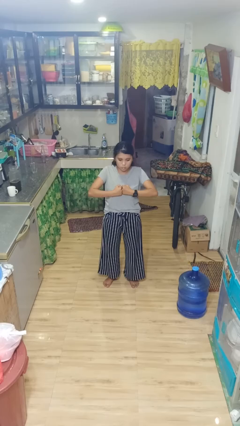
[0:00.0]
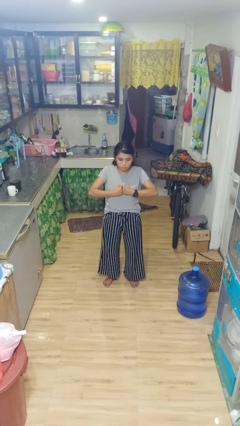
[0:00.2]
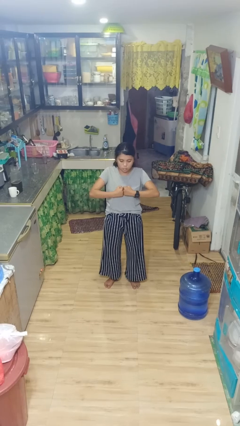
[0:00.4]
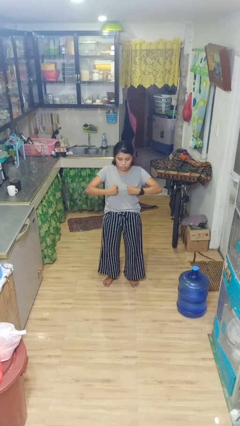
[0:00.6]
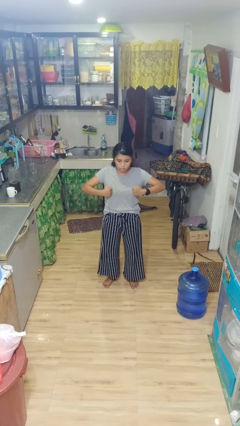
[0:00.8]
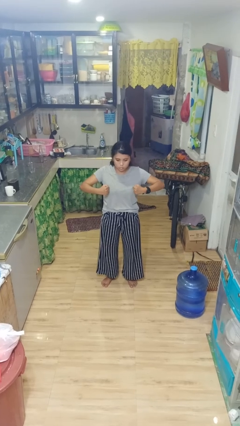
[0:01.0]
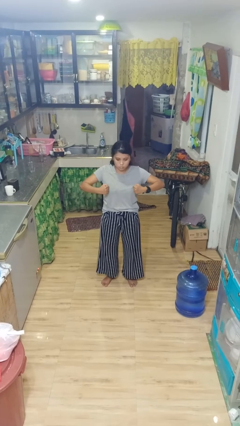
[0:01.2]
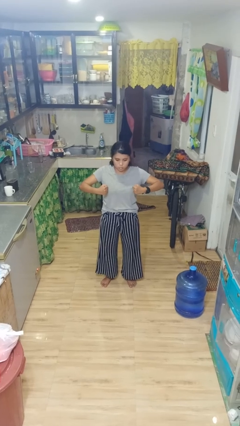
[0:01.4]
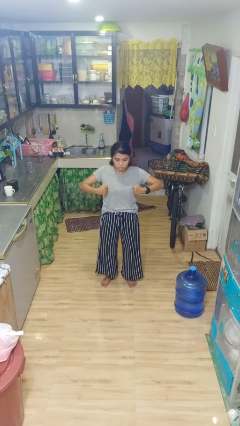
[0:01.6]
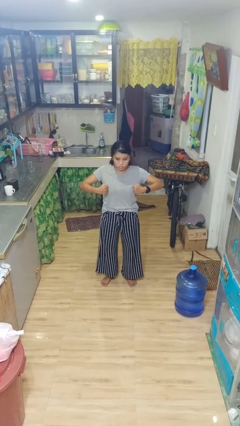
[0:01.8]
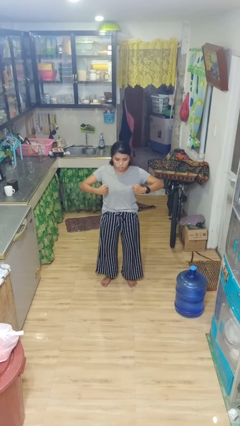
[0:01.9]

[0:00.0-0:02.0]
person gestures zoom in

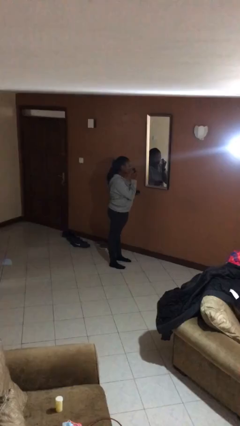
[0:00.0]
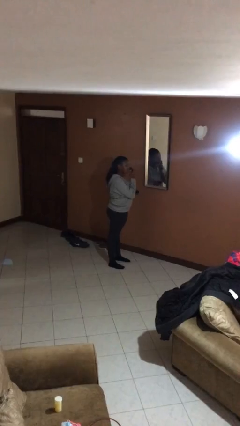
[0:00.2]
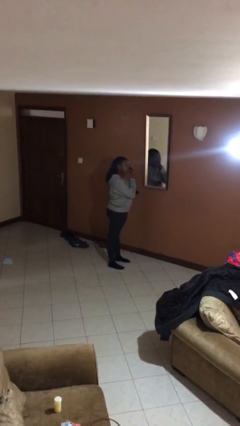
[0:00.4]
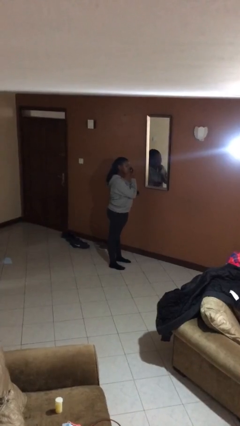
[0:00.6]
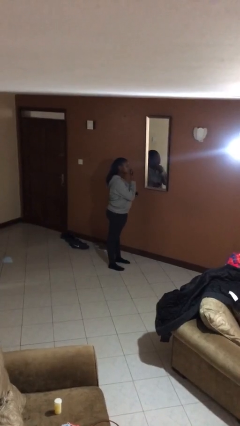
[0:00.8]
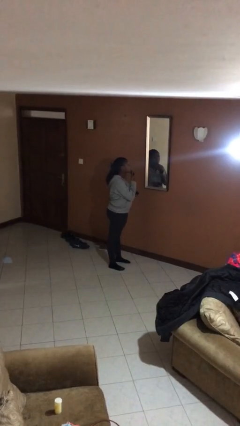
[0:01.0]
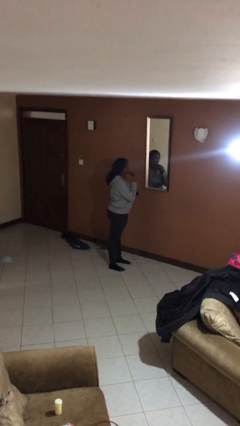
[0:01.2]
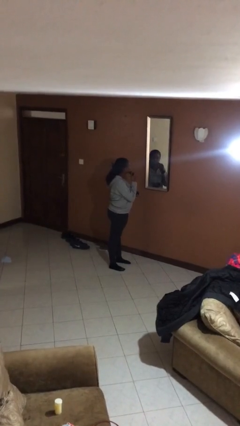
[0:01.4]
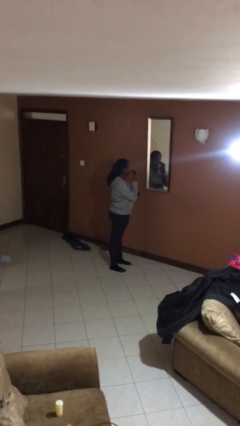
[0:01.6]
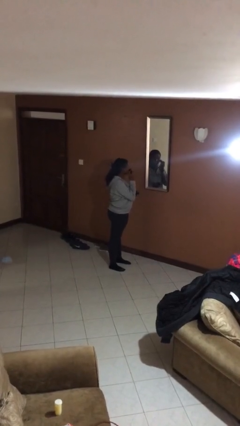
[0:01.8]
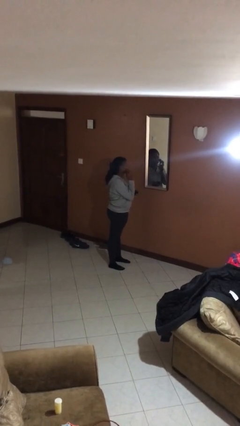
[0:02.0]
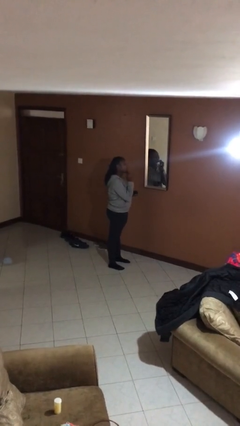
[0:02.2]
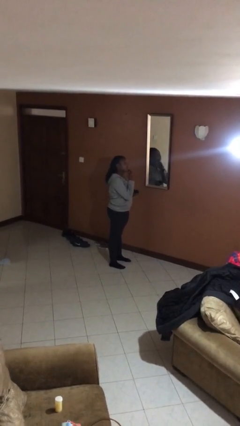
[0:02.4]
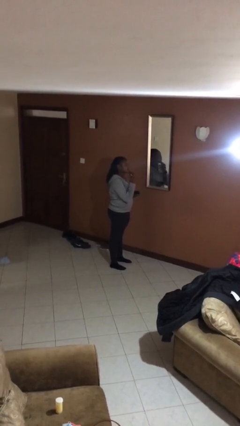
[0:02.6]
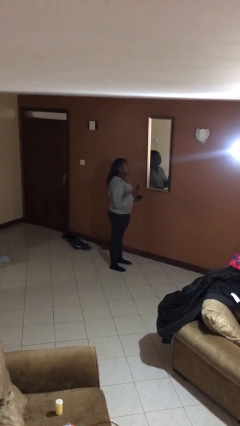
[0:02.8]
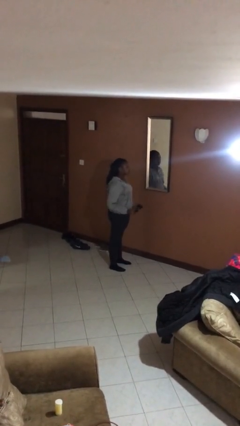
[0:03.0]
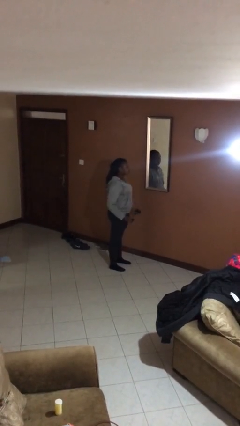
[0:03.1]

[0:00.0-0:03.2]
person applies foundation makeup

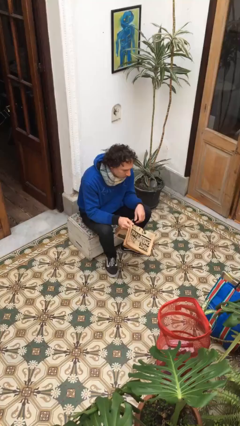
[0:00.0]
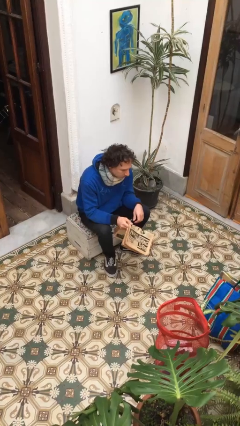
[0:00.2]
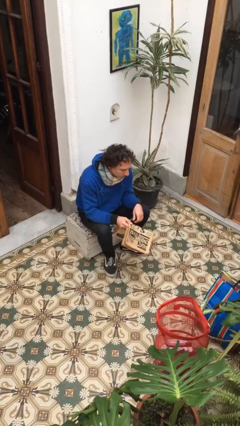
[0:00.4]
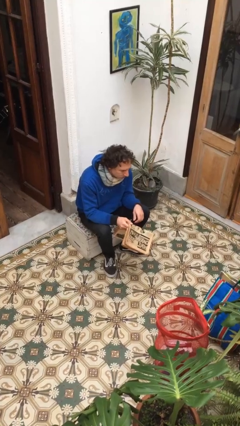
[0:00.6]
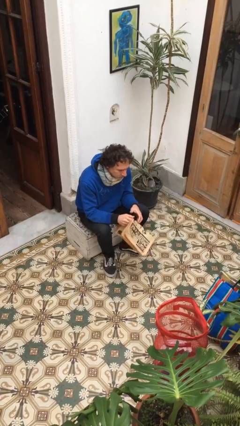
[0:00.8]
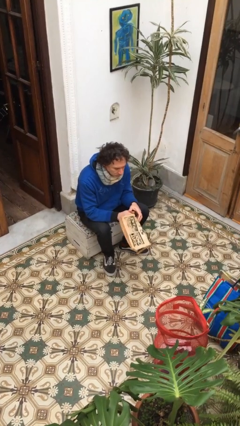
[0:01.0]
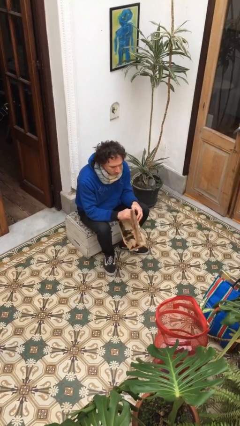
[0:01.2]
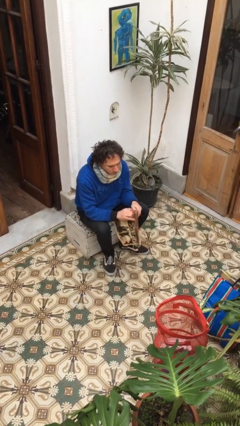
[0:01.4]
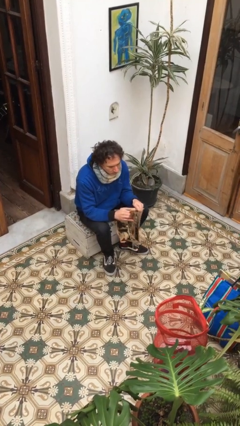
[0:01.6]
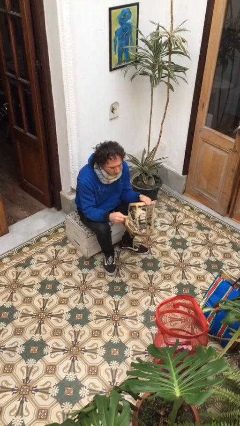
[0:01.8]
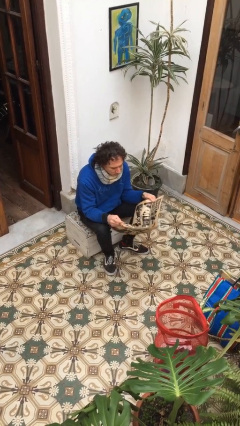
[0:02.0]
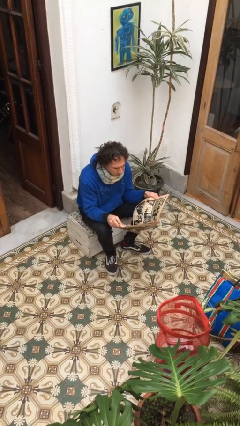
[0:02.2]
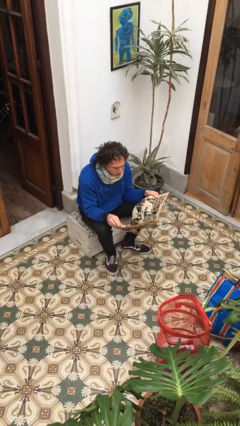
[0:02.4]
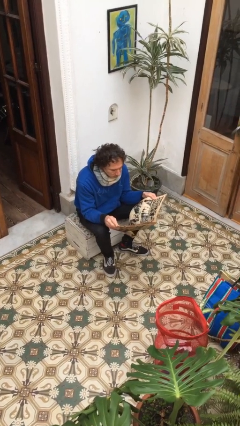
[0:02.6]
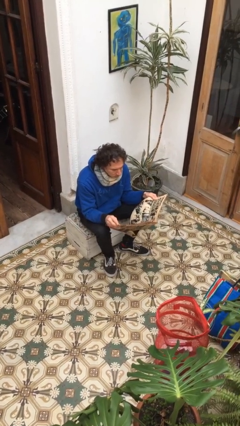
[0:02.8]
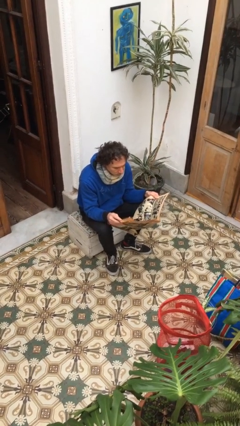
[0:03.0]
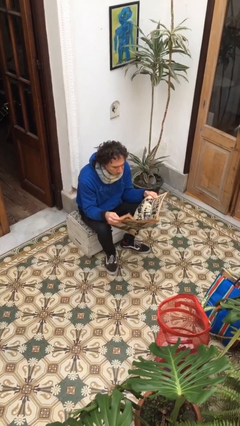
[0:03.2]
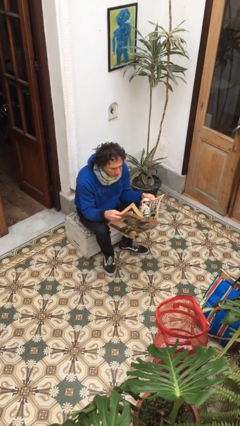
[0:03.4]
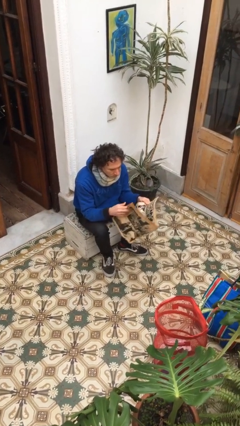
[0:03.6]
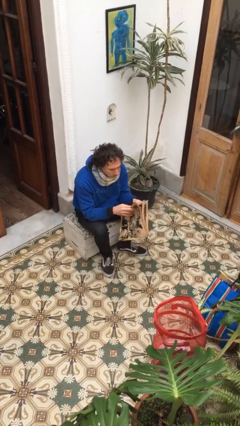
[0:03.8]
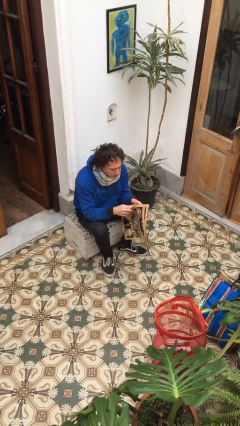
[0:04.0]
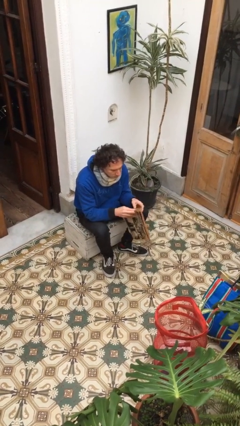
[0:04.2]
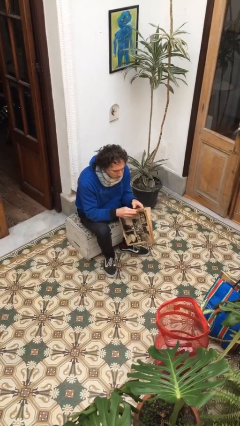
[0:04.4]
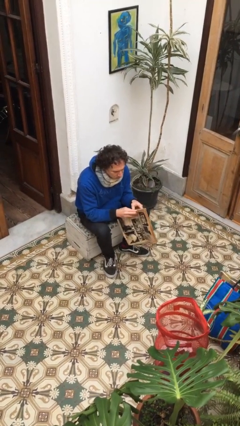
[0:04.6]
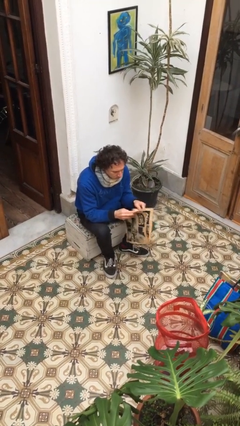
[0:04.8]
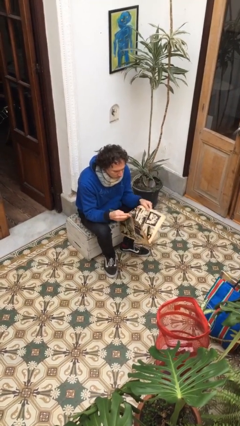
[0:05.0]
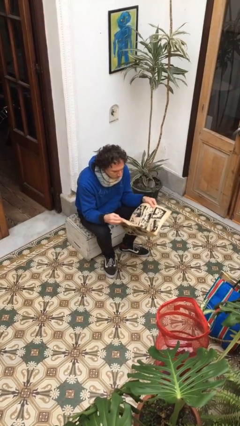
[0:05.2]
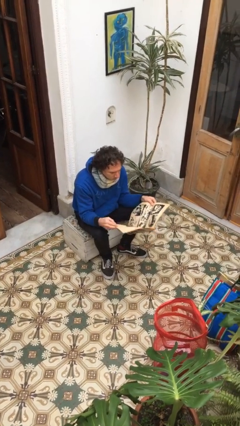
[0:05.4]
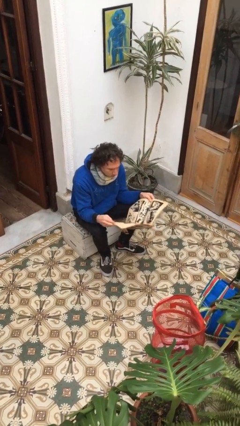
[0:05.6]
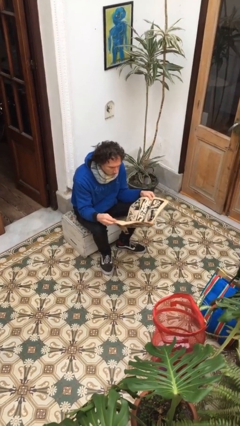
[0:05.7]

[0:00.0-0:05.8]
person reads newspaper

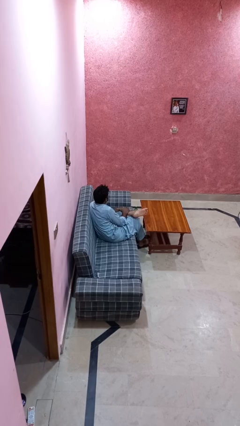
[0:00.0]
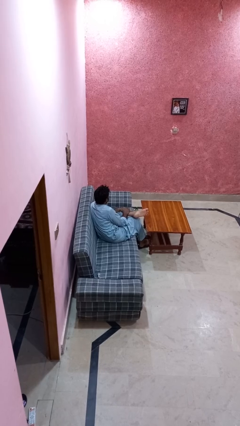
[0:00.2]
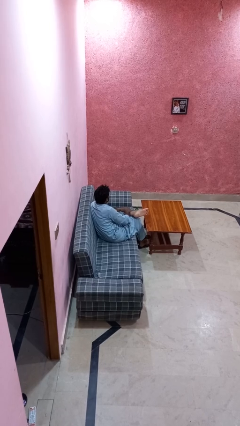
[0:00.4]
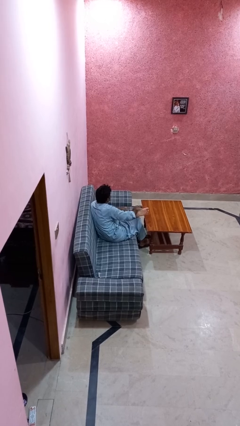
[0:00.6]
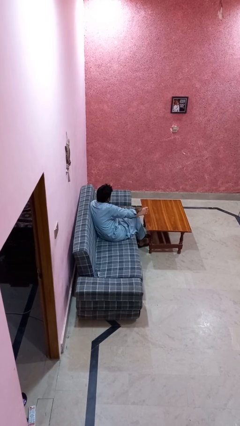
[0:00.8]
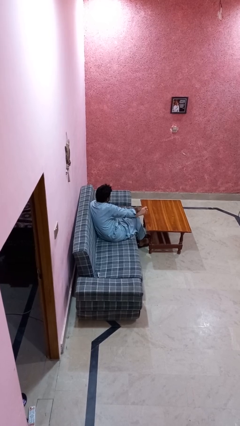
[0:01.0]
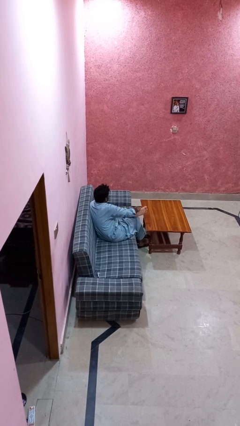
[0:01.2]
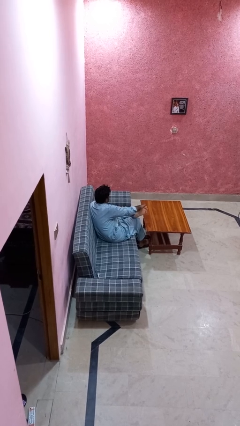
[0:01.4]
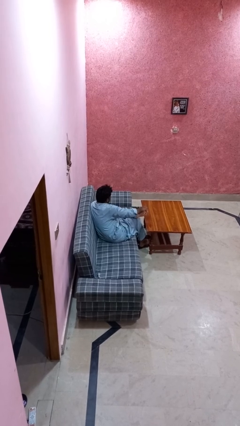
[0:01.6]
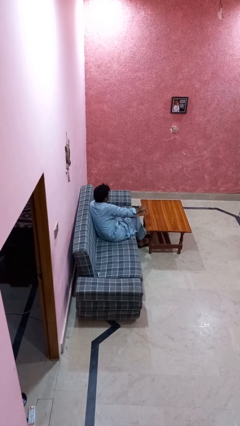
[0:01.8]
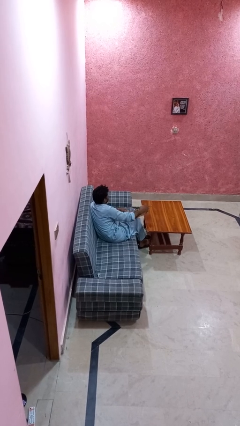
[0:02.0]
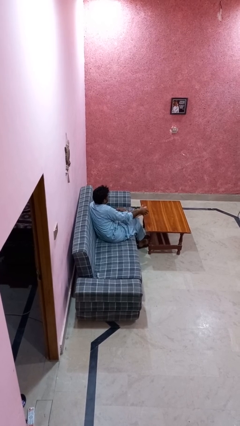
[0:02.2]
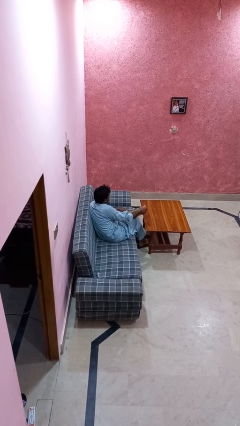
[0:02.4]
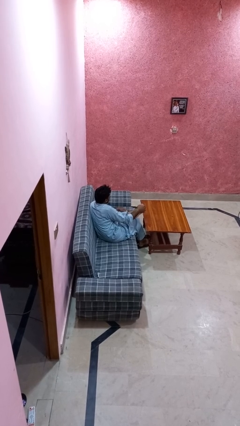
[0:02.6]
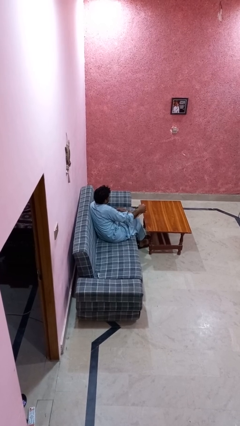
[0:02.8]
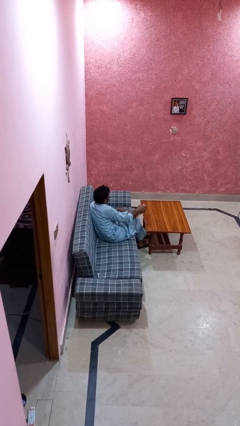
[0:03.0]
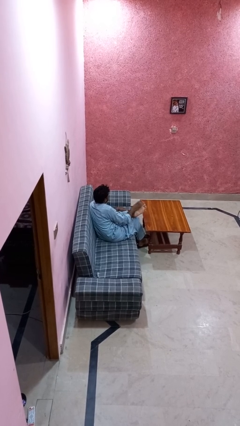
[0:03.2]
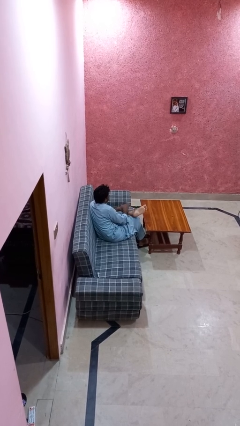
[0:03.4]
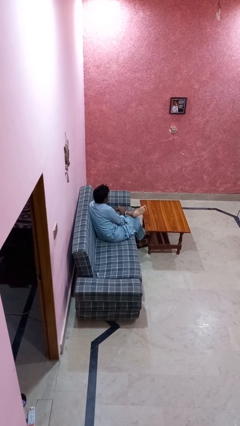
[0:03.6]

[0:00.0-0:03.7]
person rubs foot

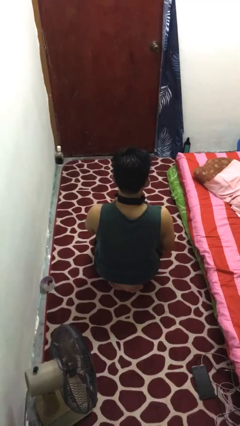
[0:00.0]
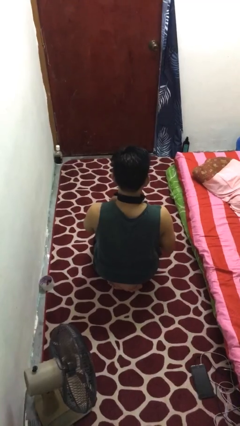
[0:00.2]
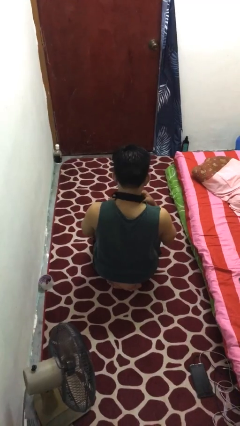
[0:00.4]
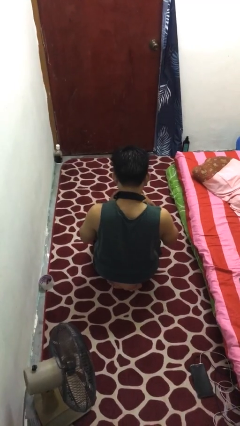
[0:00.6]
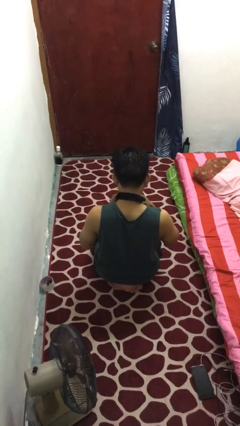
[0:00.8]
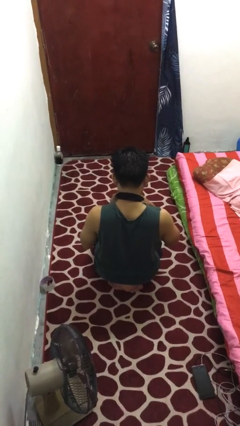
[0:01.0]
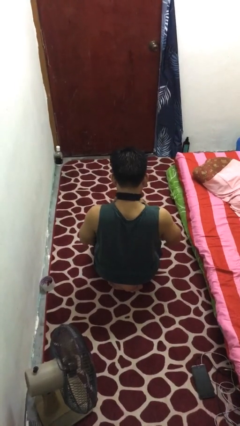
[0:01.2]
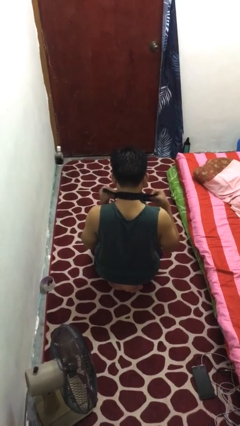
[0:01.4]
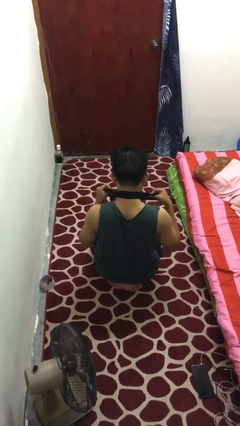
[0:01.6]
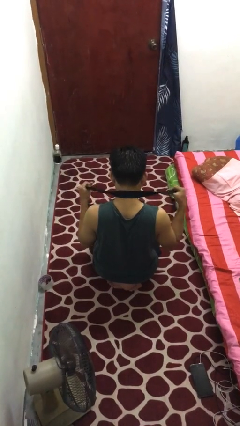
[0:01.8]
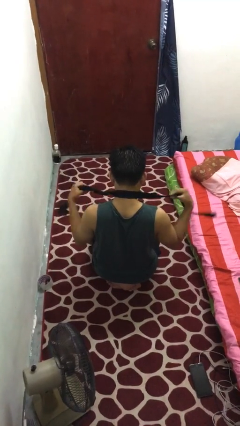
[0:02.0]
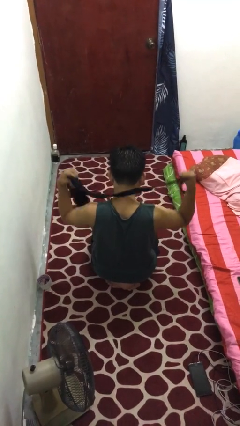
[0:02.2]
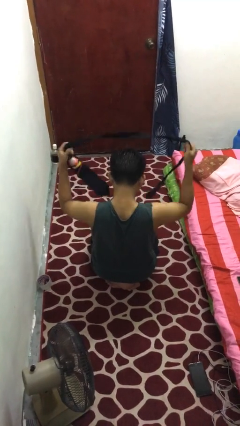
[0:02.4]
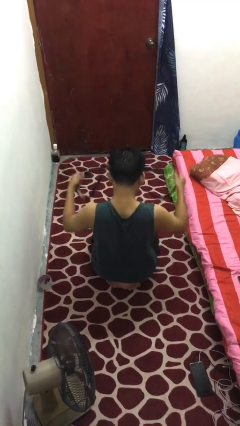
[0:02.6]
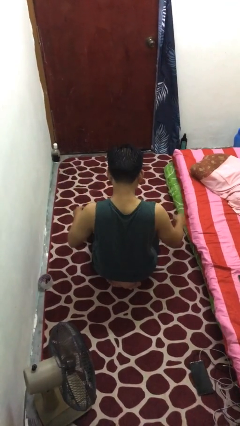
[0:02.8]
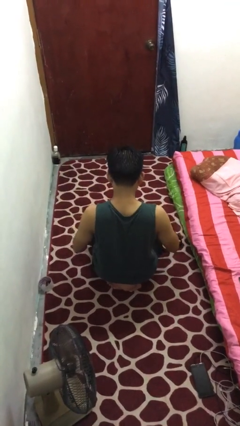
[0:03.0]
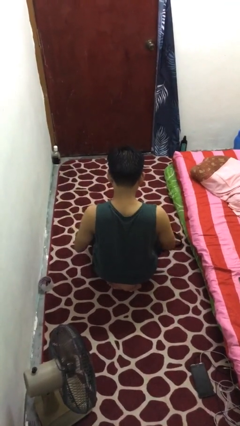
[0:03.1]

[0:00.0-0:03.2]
person takes off necktie
